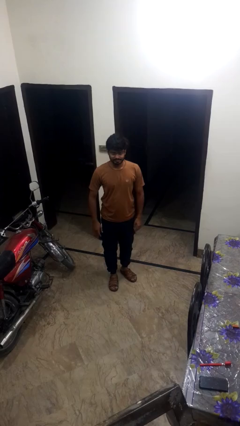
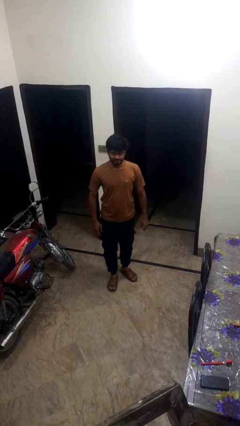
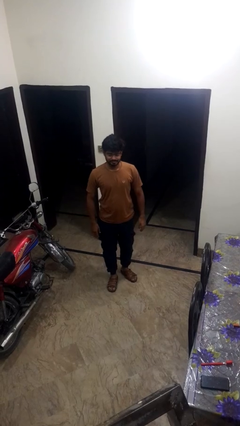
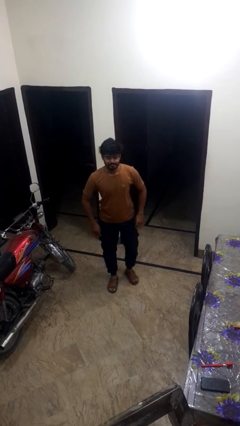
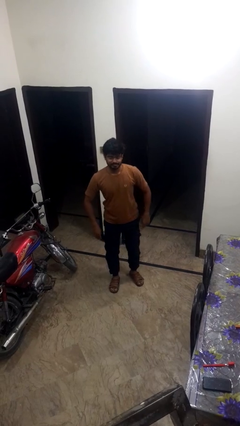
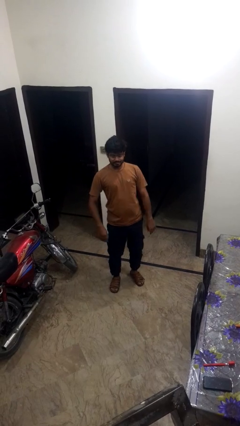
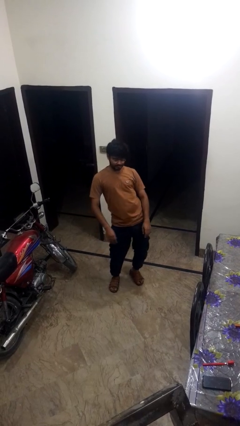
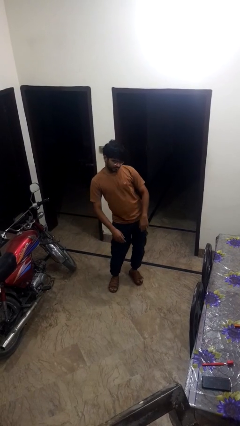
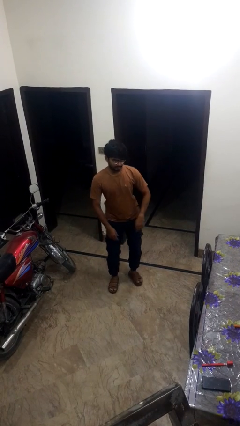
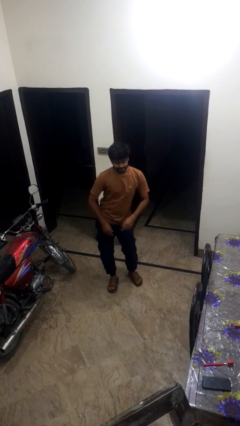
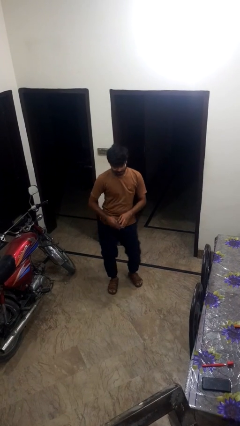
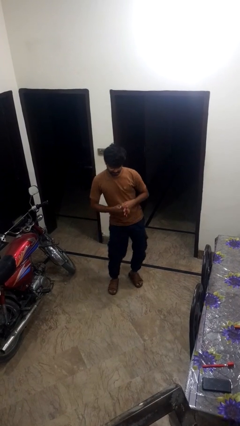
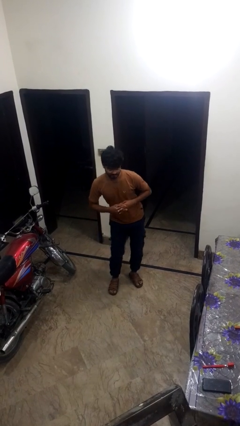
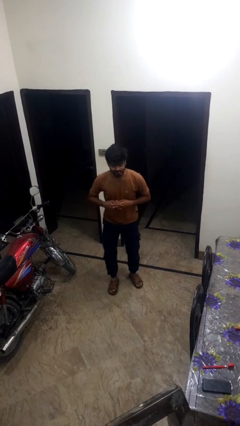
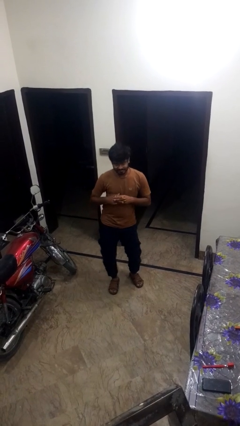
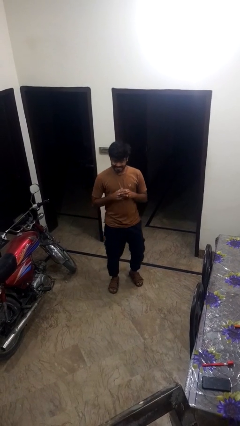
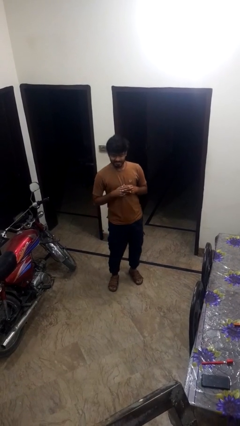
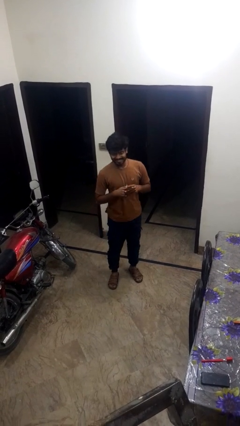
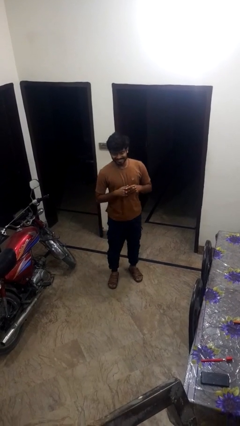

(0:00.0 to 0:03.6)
person wiggles hips

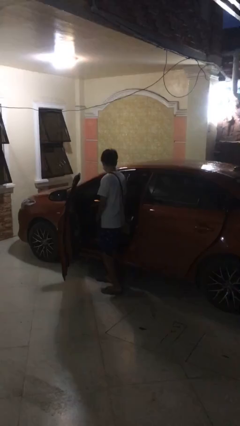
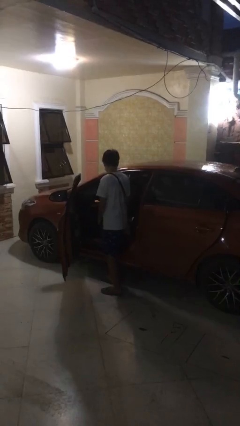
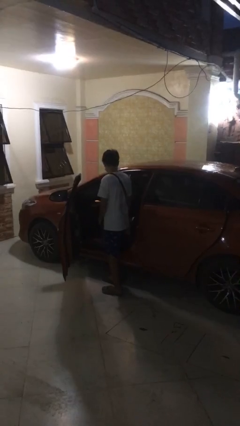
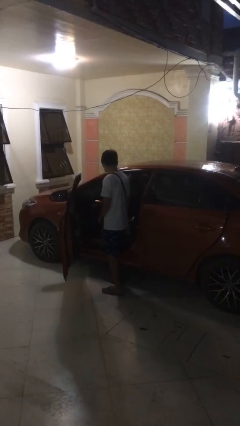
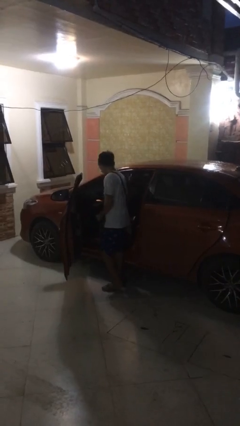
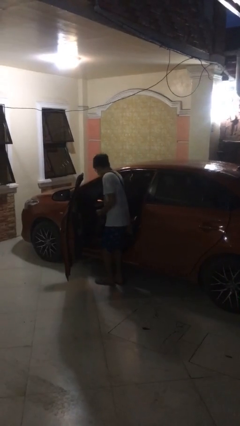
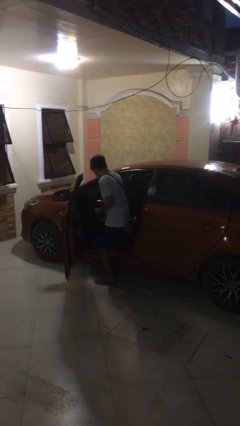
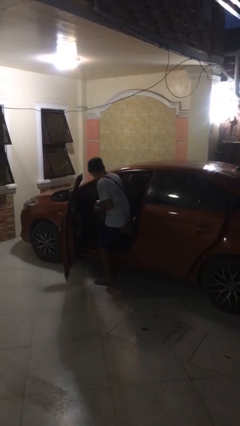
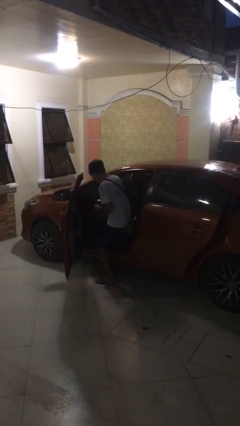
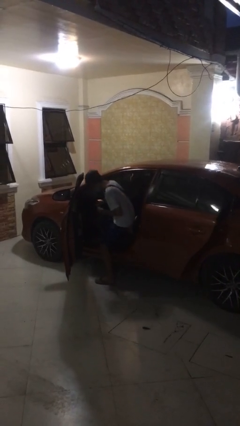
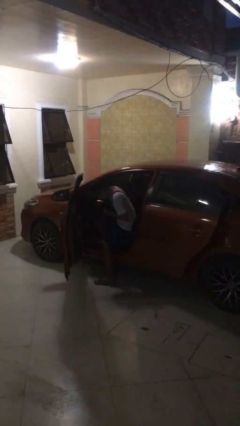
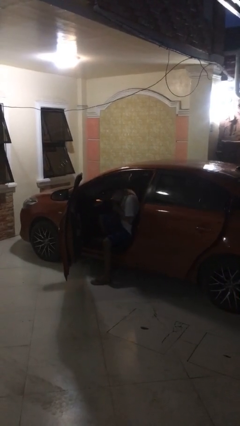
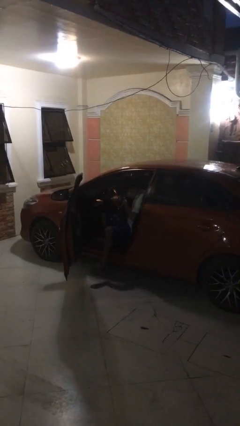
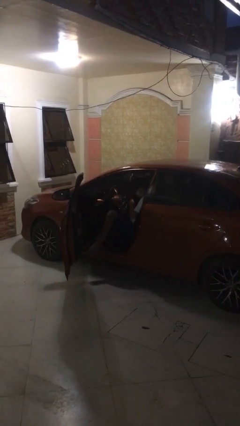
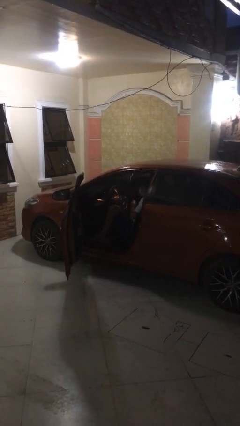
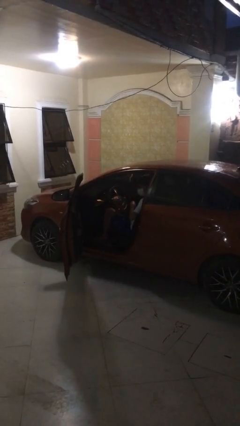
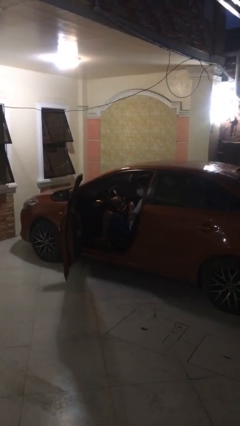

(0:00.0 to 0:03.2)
person enters car

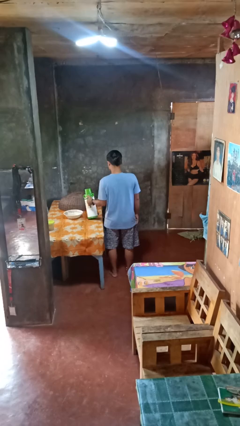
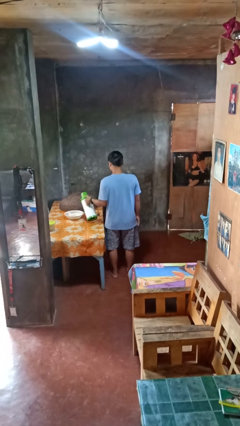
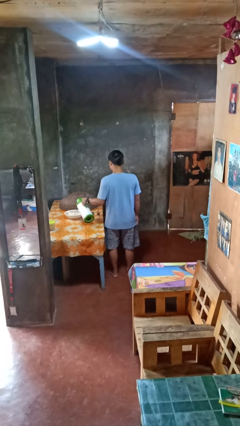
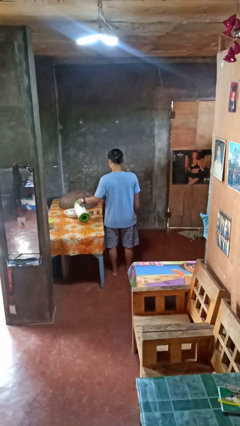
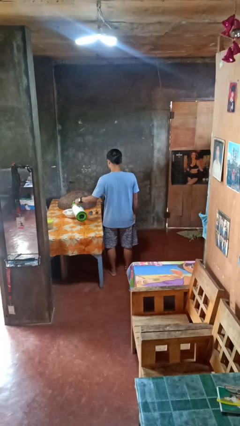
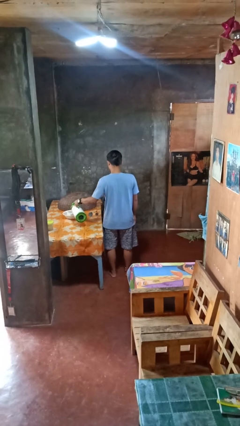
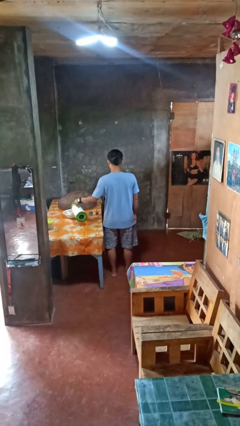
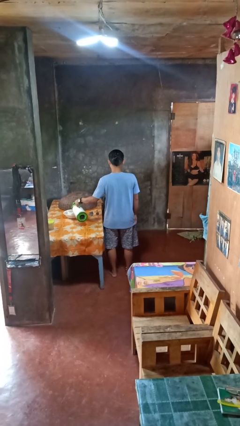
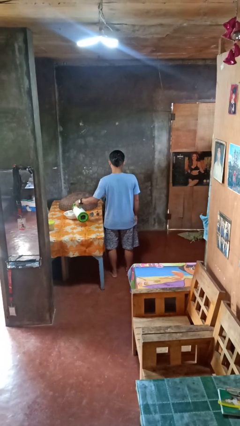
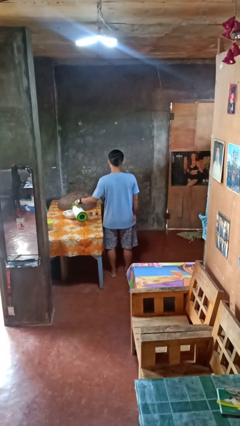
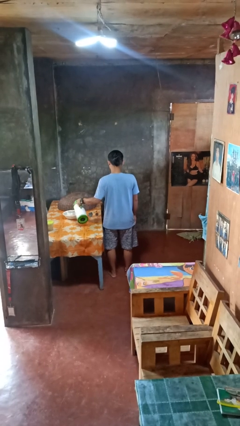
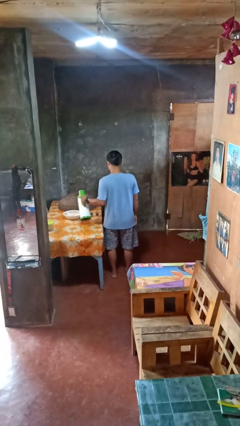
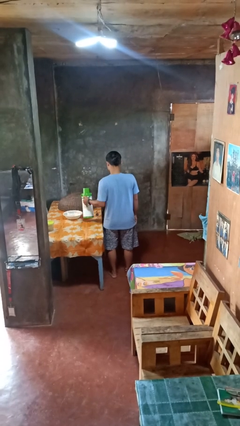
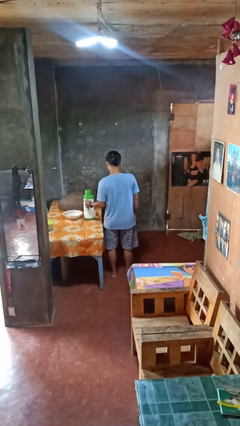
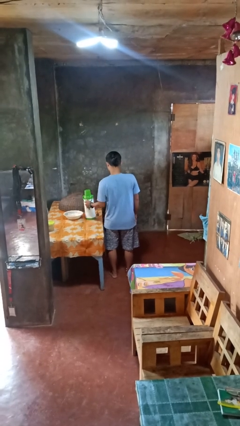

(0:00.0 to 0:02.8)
person pours into bowl

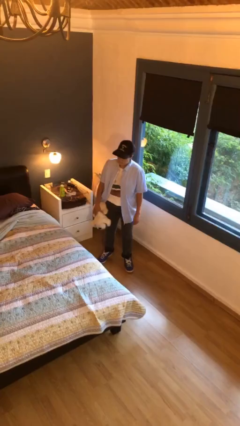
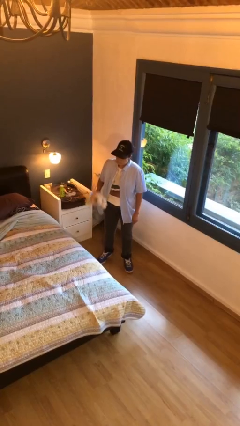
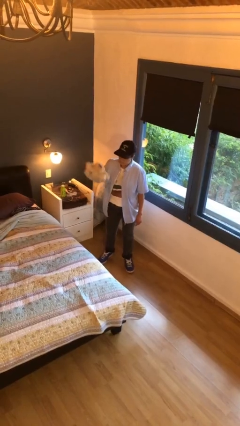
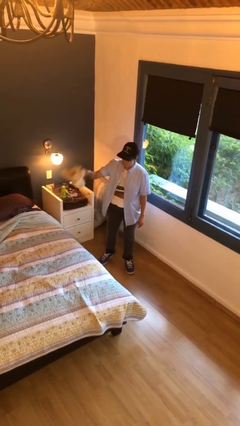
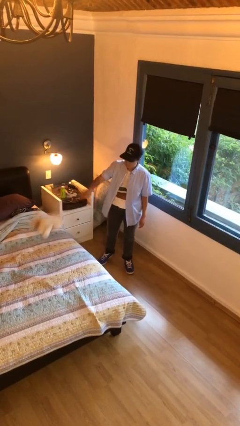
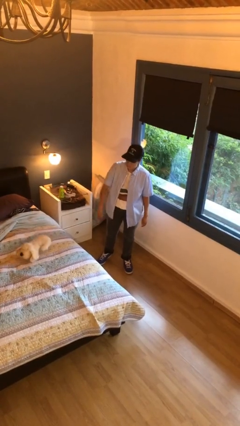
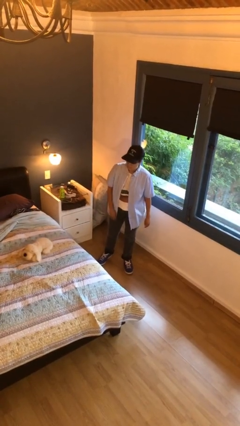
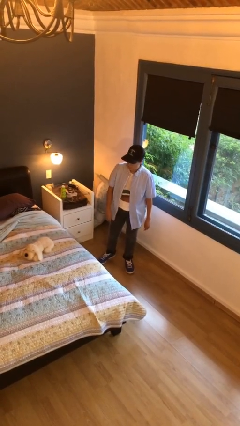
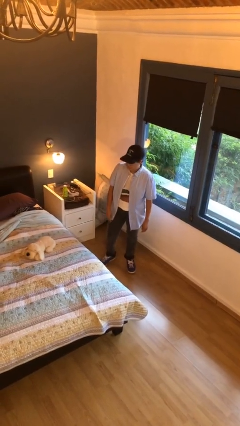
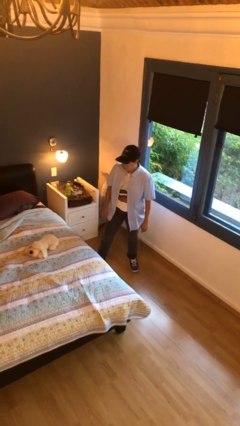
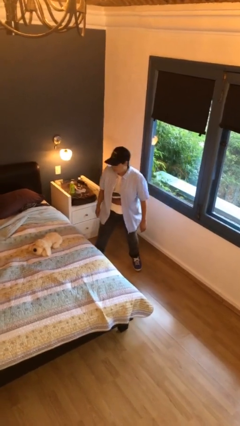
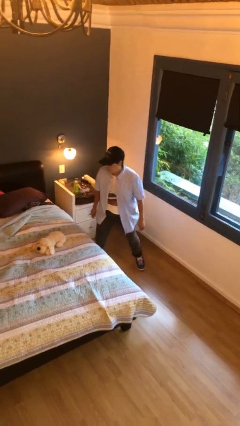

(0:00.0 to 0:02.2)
person throws object on bed

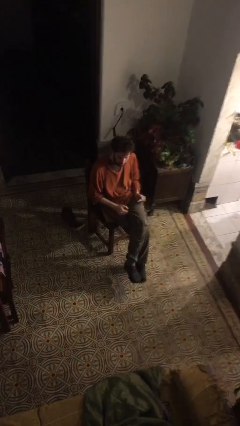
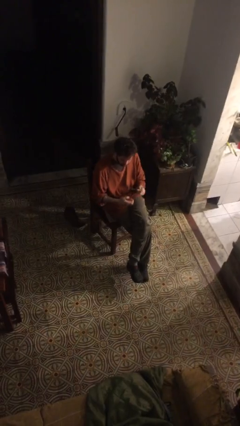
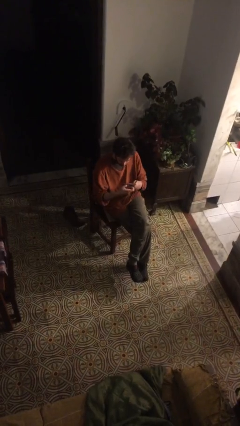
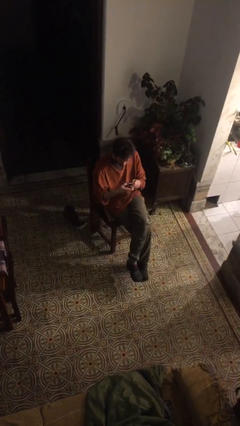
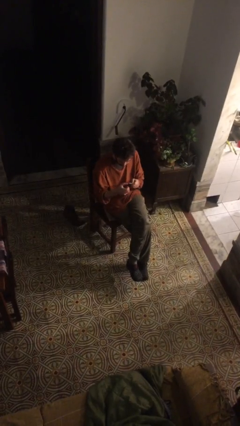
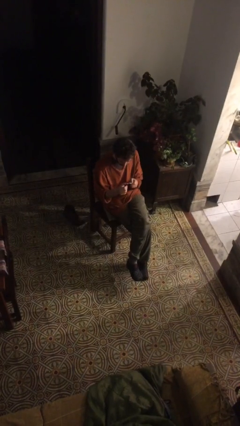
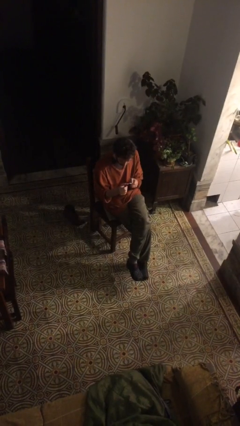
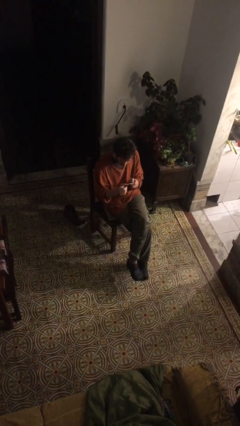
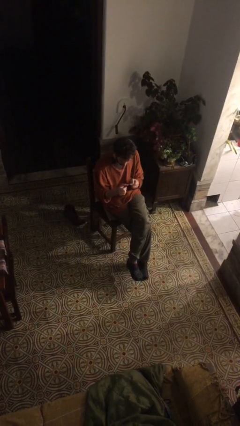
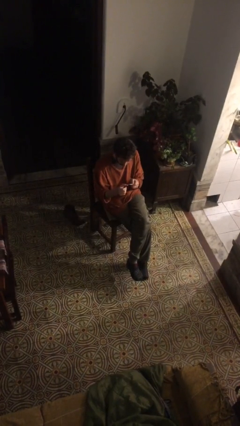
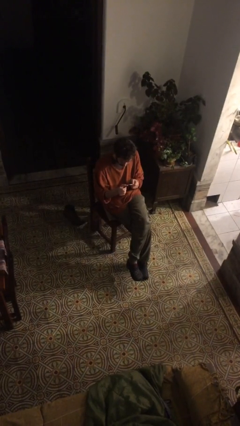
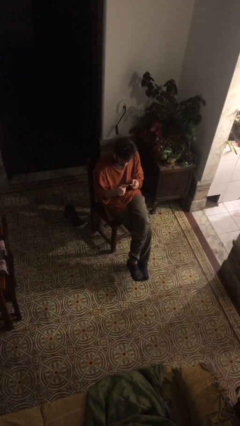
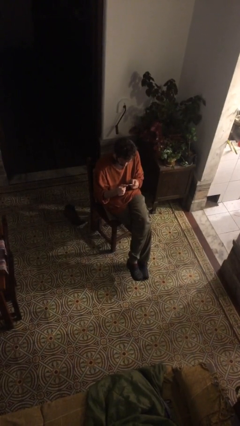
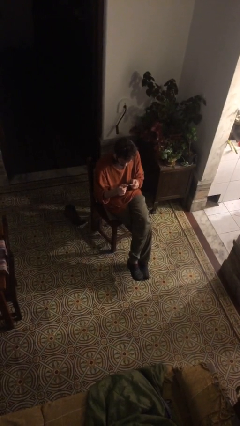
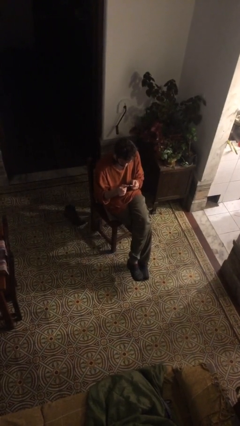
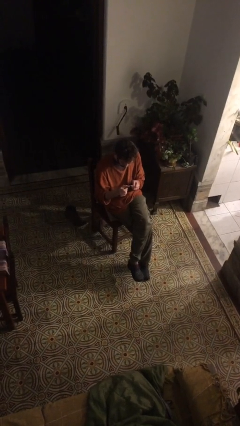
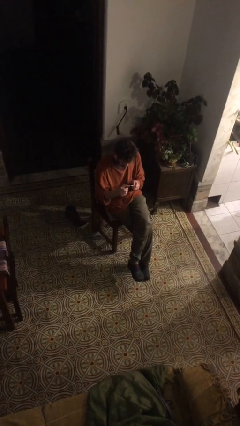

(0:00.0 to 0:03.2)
person files fingernails

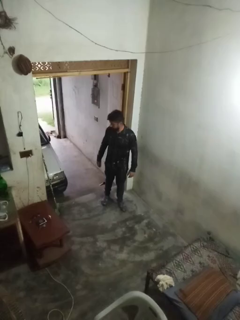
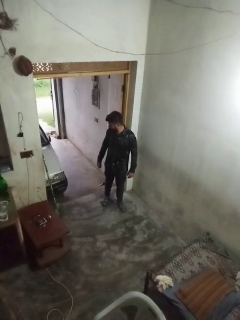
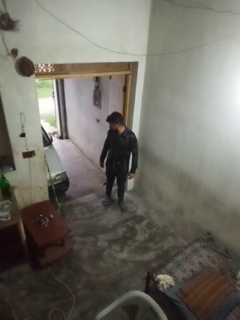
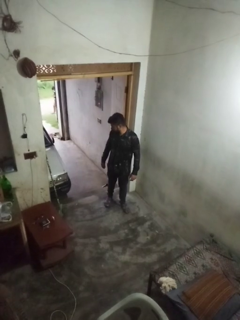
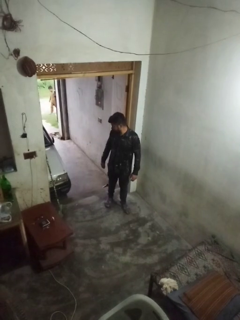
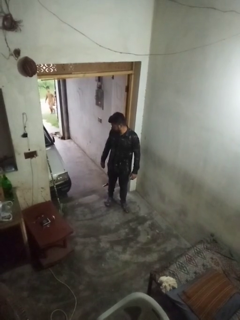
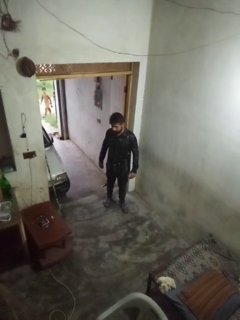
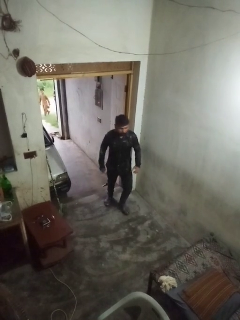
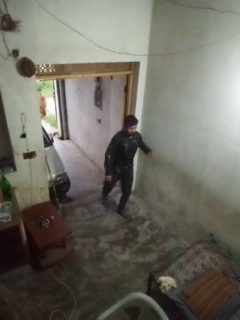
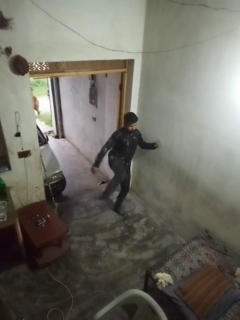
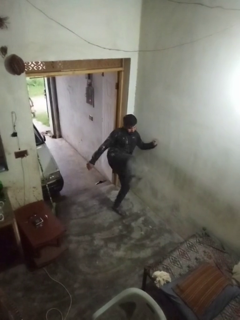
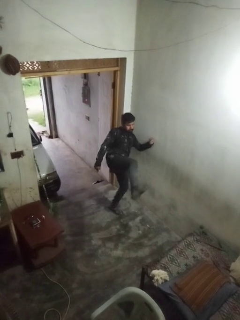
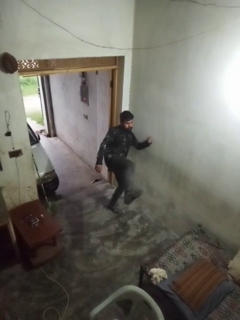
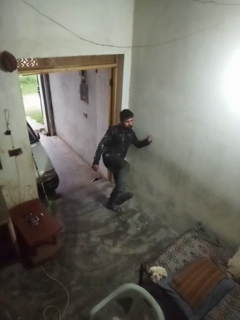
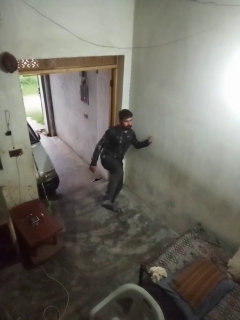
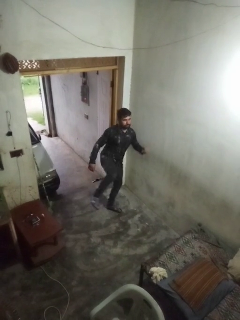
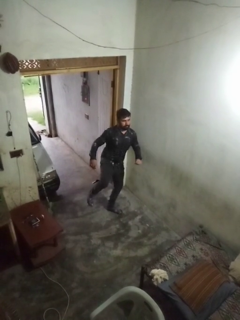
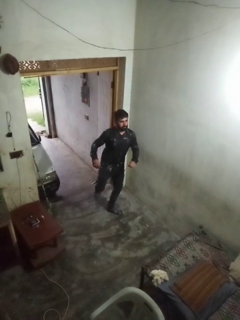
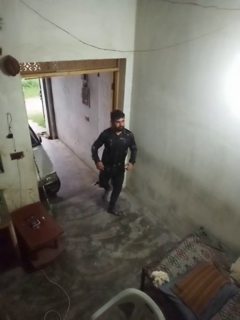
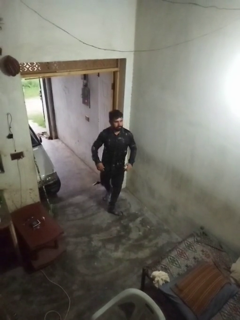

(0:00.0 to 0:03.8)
person karate kicks
